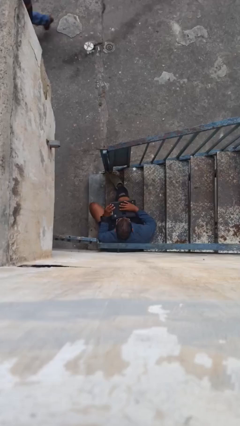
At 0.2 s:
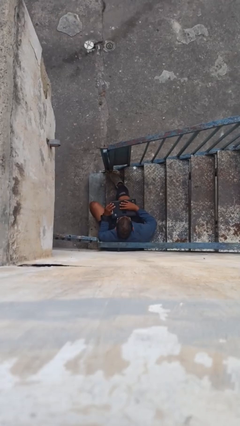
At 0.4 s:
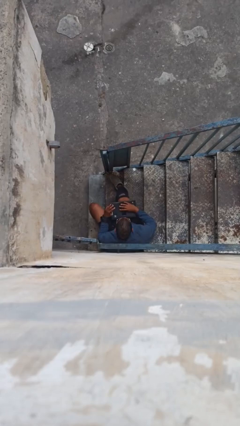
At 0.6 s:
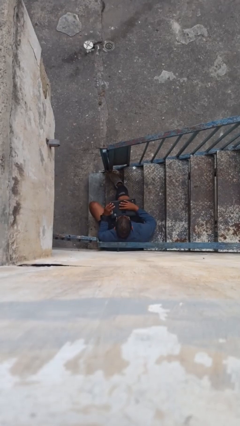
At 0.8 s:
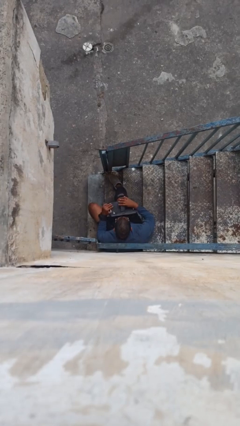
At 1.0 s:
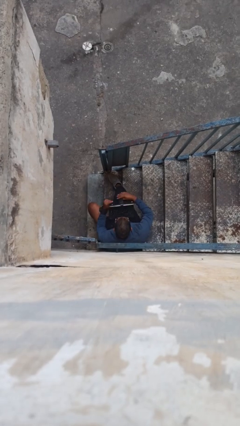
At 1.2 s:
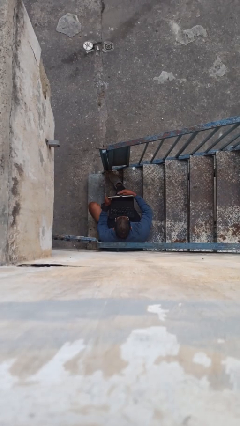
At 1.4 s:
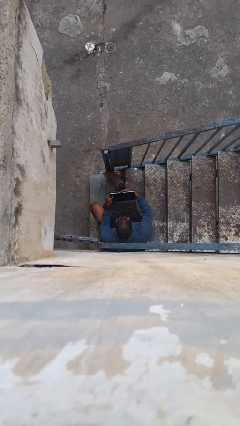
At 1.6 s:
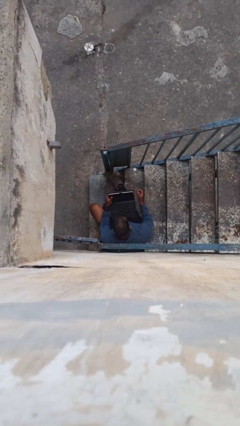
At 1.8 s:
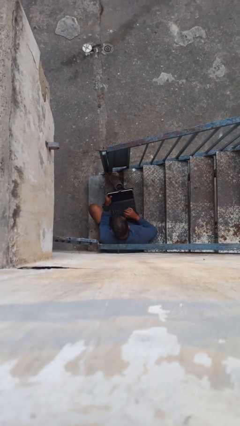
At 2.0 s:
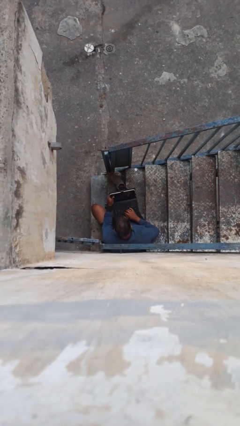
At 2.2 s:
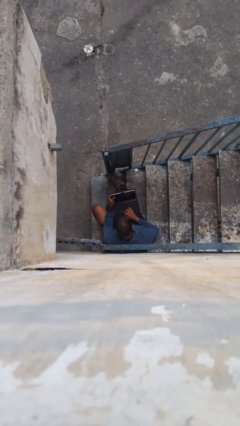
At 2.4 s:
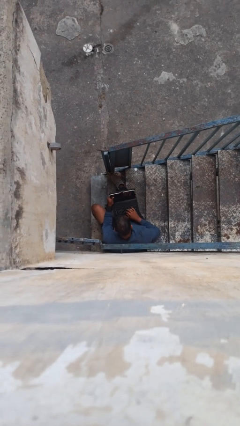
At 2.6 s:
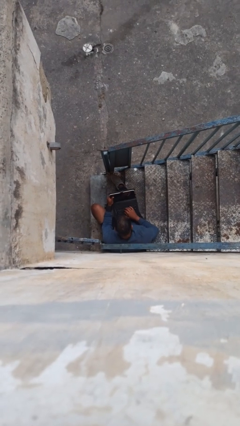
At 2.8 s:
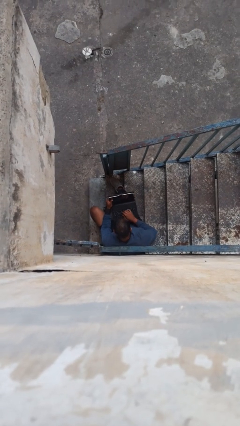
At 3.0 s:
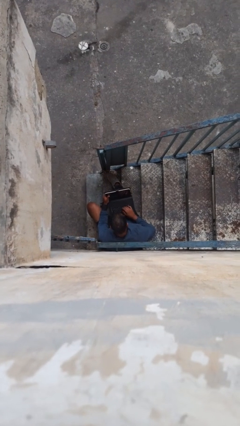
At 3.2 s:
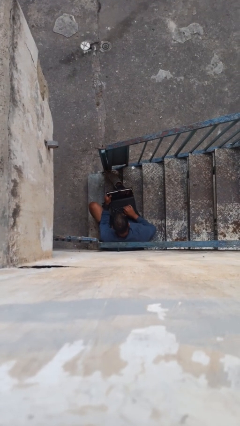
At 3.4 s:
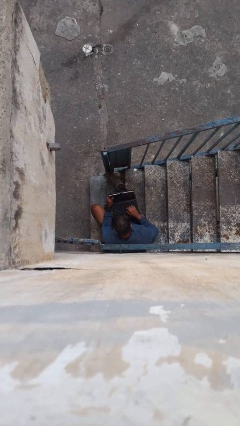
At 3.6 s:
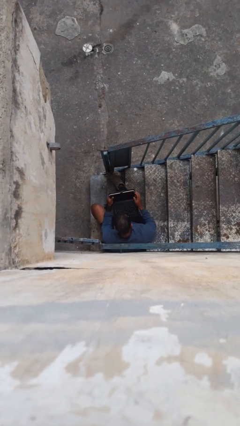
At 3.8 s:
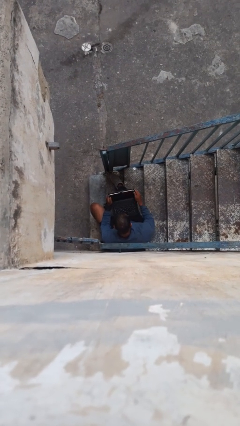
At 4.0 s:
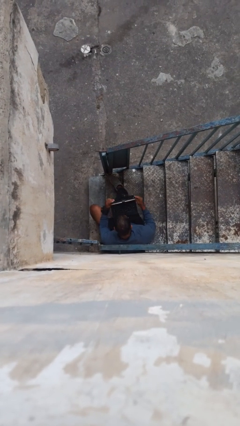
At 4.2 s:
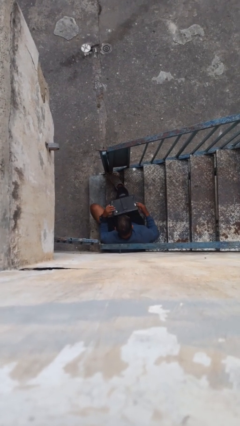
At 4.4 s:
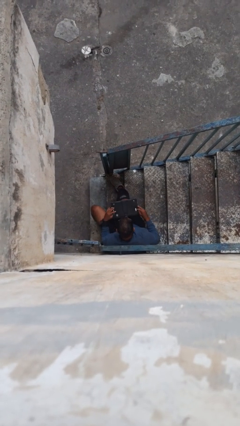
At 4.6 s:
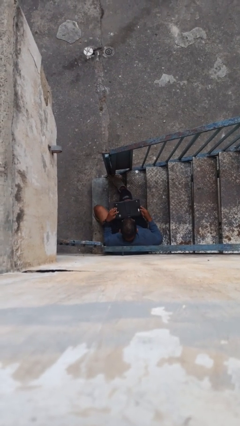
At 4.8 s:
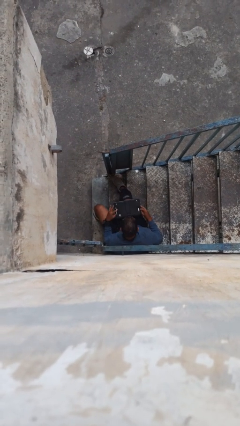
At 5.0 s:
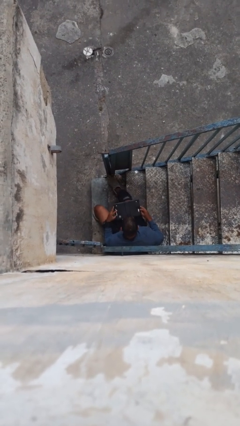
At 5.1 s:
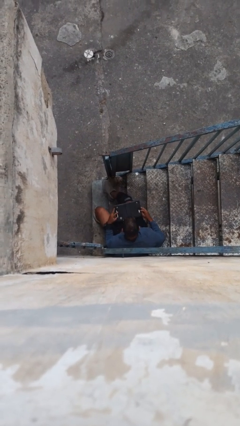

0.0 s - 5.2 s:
person interacts with laptop

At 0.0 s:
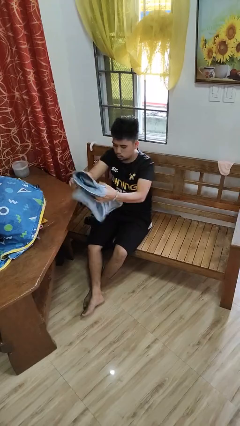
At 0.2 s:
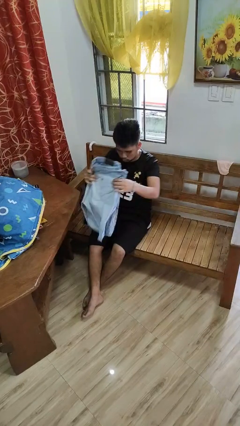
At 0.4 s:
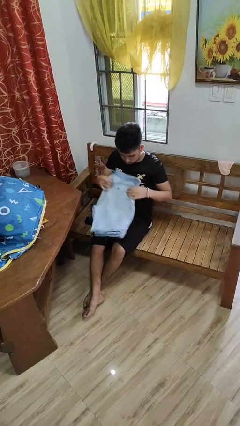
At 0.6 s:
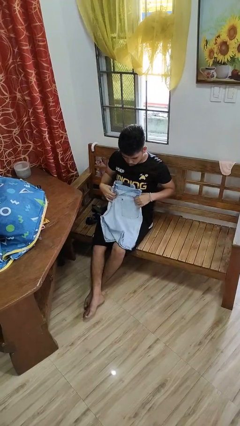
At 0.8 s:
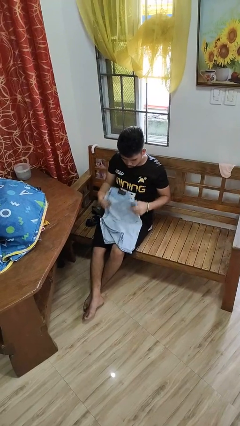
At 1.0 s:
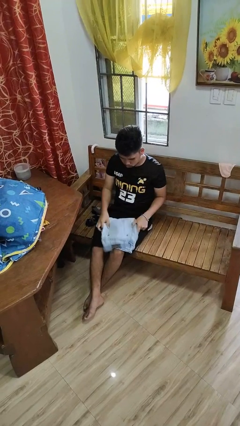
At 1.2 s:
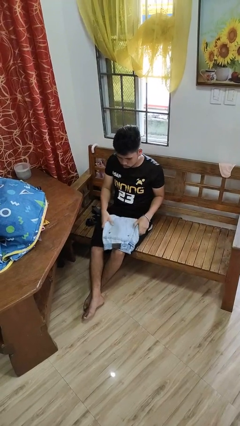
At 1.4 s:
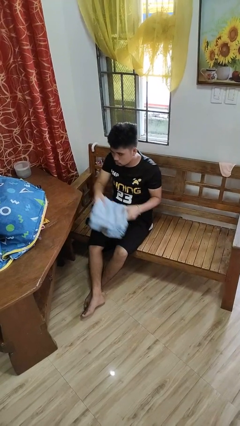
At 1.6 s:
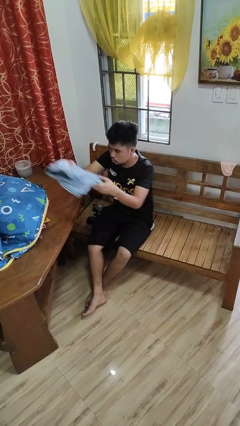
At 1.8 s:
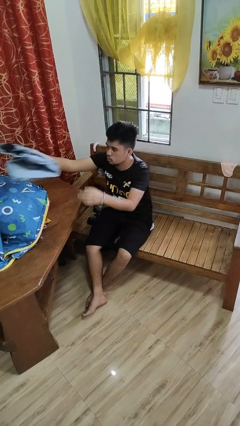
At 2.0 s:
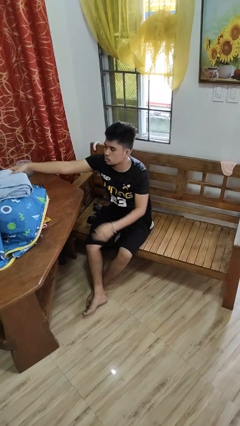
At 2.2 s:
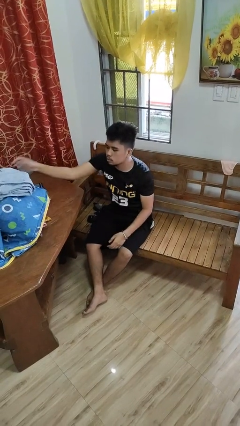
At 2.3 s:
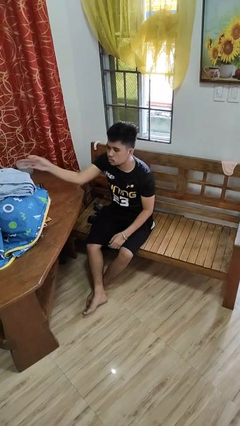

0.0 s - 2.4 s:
person folds pants

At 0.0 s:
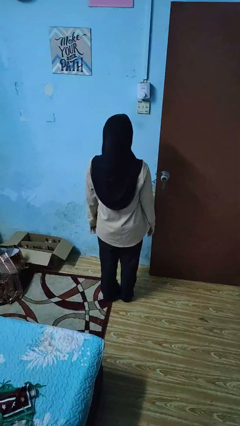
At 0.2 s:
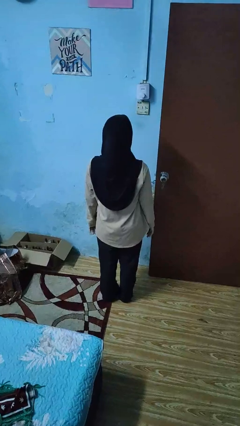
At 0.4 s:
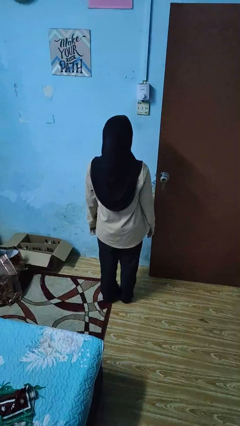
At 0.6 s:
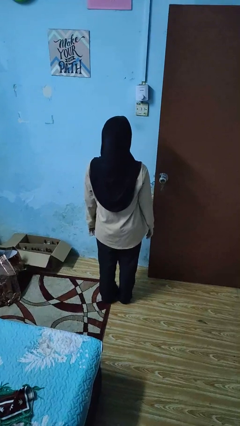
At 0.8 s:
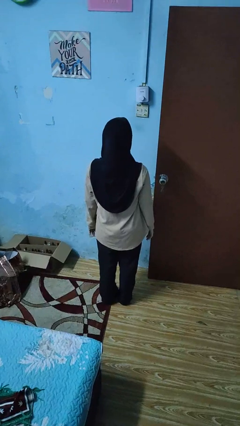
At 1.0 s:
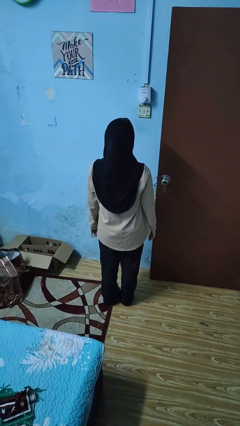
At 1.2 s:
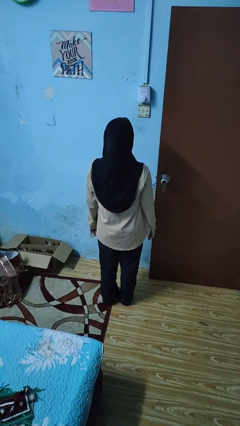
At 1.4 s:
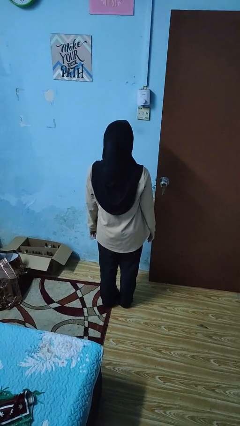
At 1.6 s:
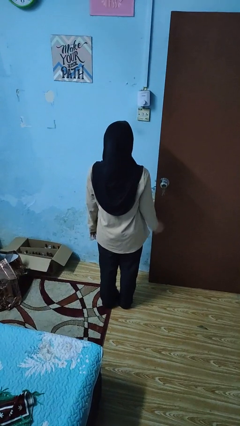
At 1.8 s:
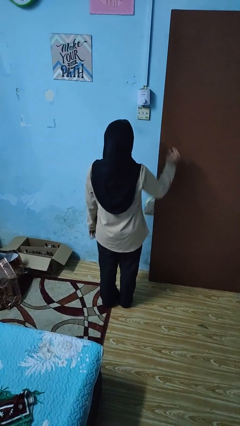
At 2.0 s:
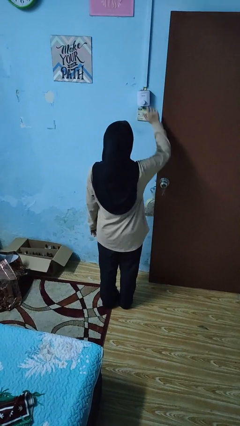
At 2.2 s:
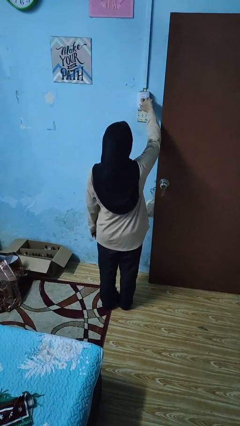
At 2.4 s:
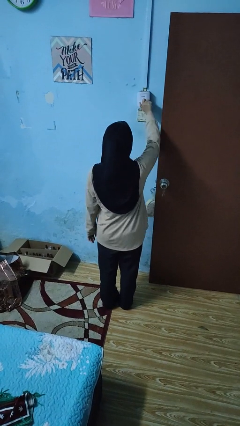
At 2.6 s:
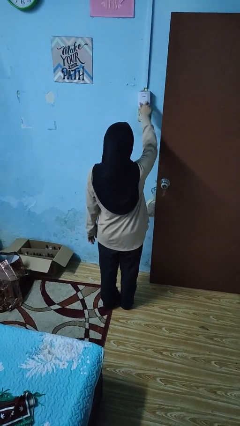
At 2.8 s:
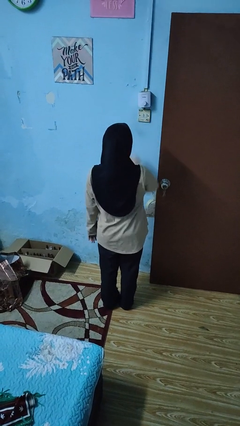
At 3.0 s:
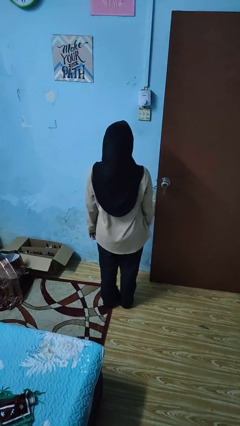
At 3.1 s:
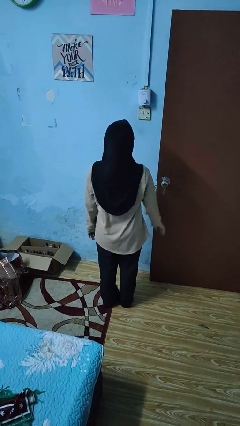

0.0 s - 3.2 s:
person adjusts thermostat

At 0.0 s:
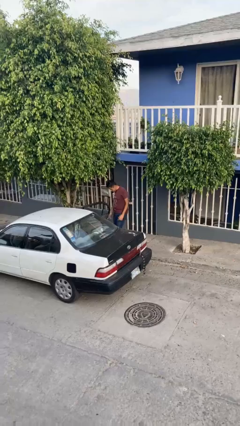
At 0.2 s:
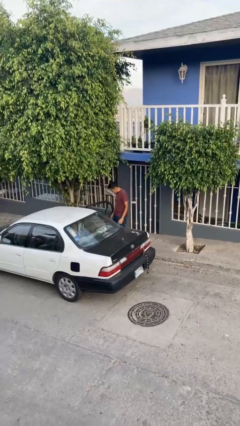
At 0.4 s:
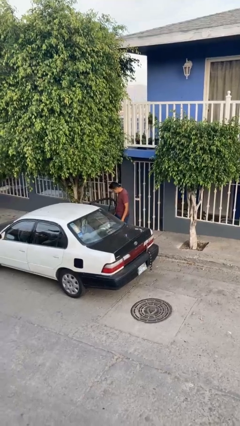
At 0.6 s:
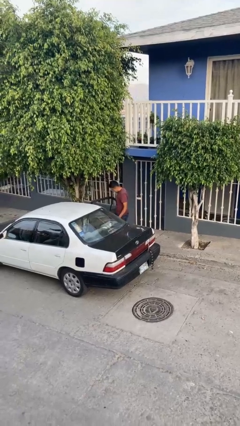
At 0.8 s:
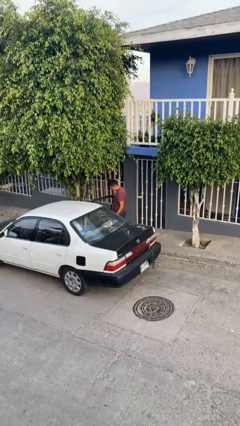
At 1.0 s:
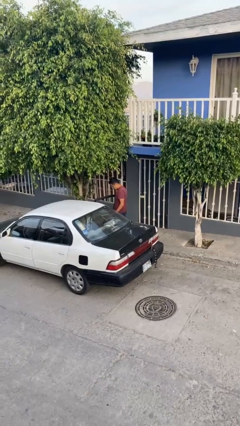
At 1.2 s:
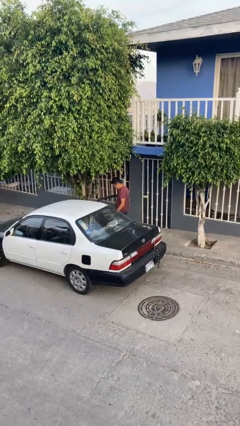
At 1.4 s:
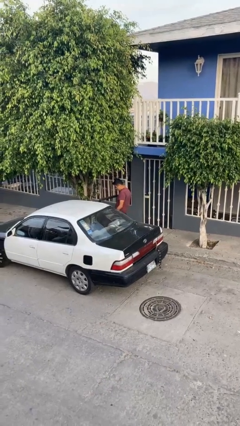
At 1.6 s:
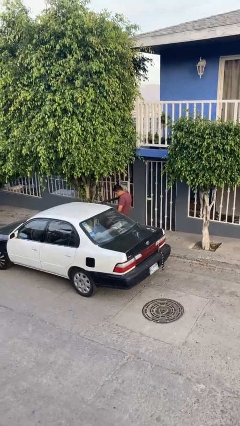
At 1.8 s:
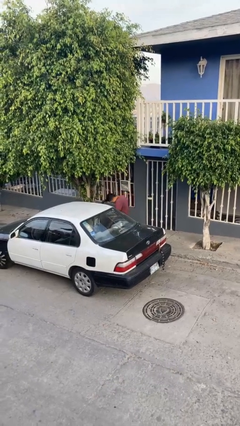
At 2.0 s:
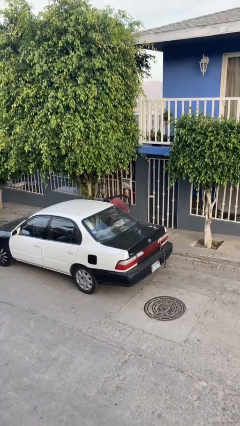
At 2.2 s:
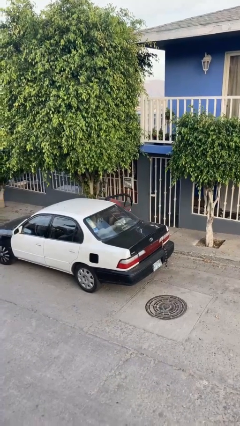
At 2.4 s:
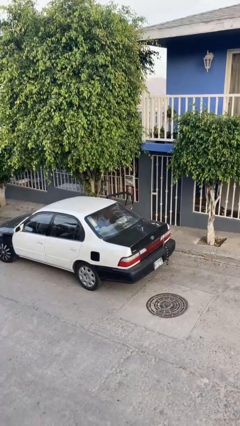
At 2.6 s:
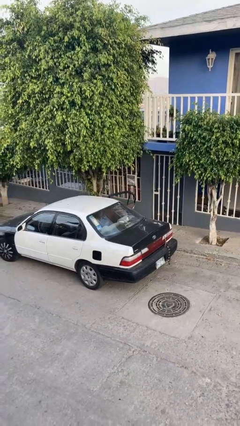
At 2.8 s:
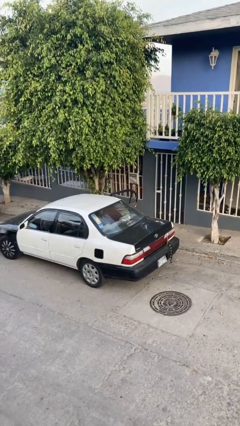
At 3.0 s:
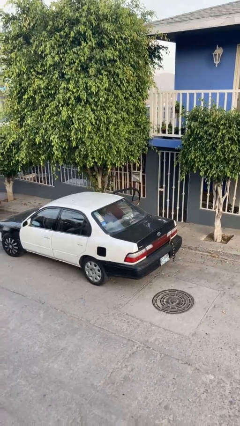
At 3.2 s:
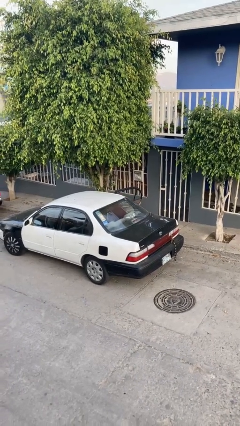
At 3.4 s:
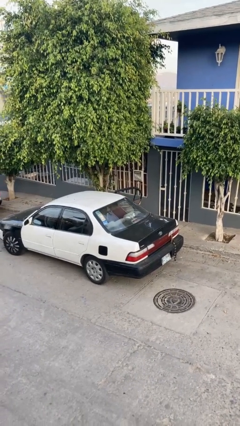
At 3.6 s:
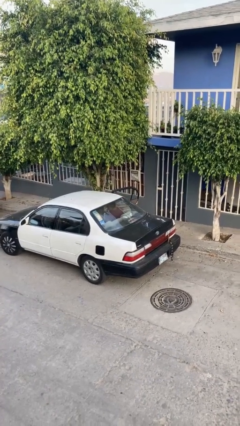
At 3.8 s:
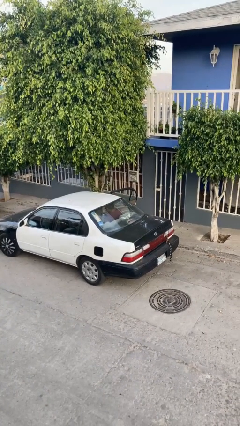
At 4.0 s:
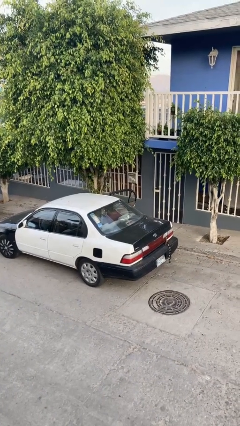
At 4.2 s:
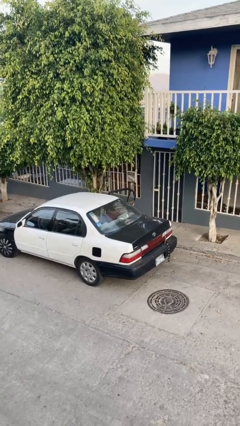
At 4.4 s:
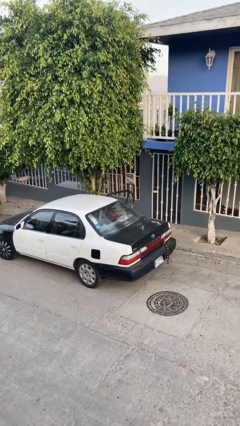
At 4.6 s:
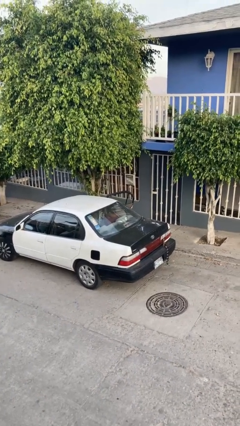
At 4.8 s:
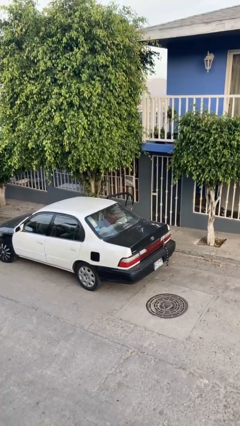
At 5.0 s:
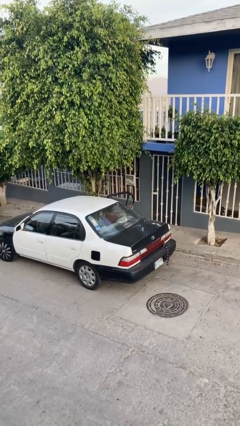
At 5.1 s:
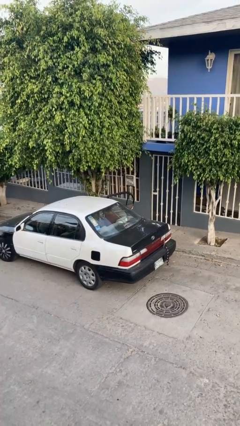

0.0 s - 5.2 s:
person enters car

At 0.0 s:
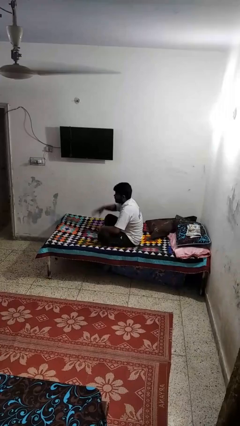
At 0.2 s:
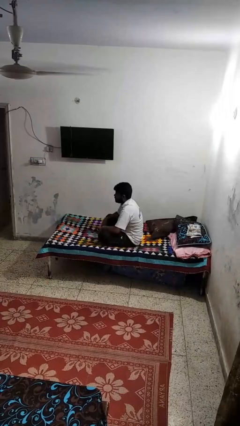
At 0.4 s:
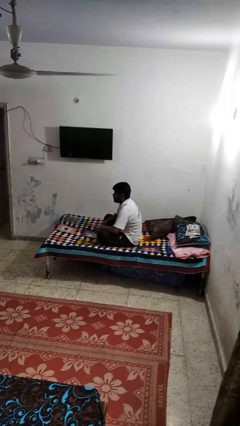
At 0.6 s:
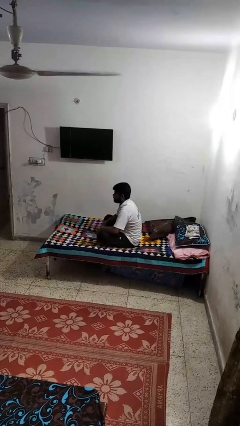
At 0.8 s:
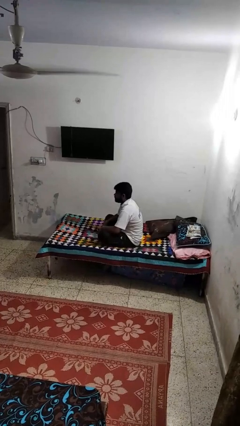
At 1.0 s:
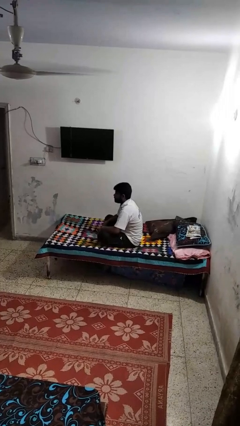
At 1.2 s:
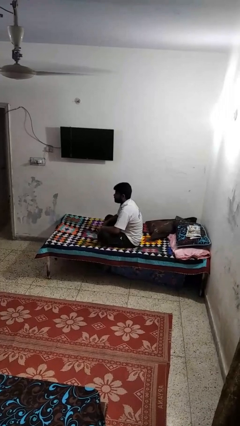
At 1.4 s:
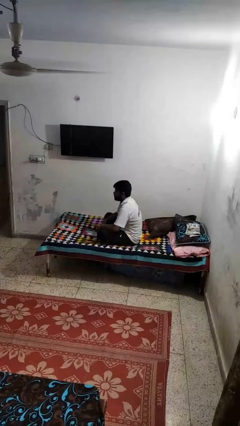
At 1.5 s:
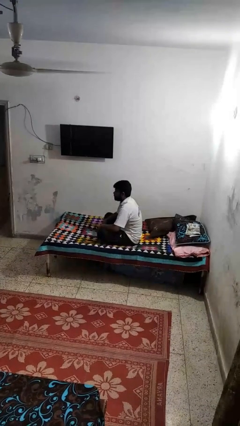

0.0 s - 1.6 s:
person gestures lower hand
